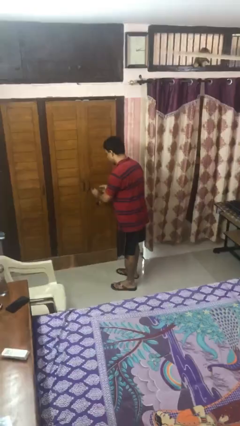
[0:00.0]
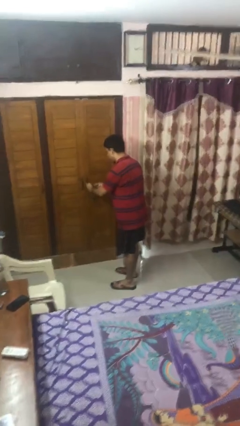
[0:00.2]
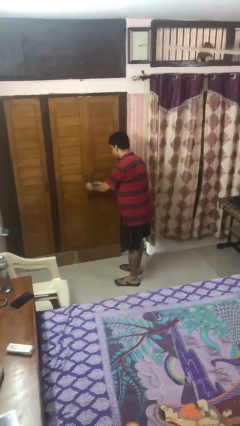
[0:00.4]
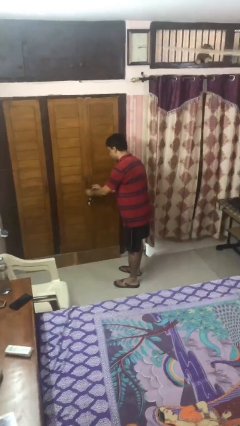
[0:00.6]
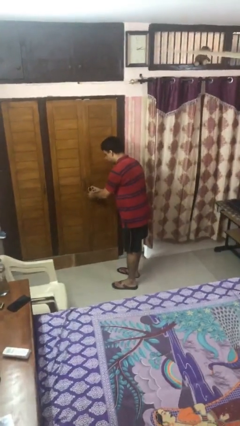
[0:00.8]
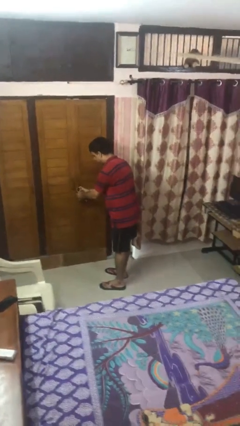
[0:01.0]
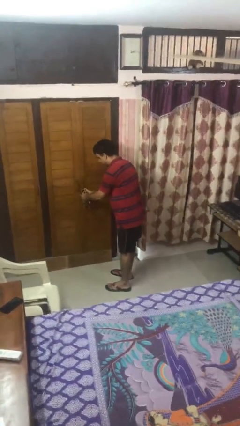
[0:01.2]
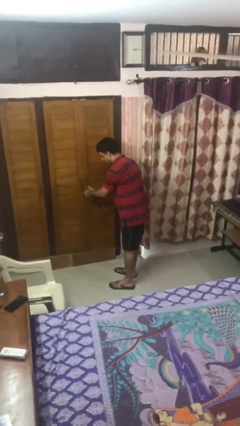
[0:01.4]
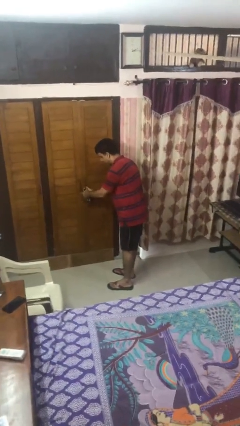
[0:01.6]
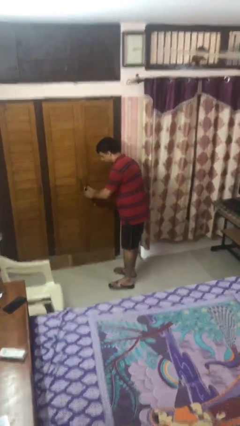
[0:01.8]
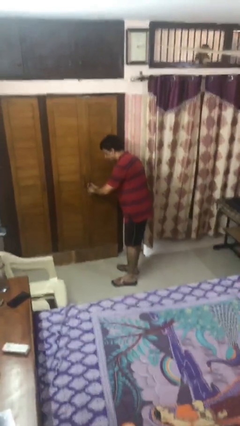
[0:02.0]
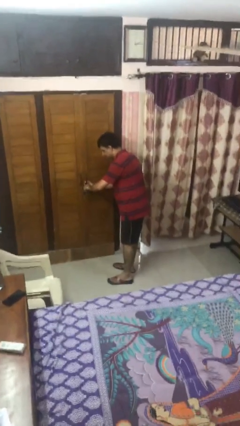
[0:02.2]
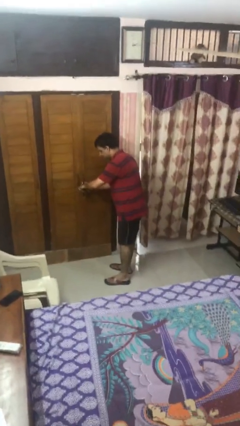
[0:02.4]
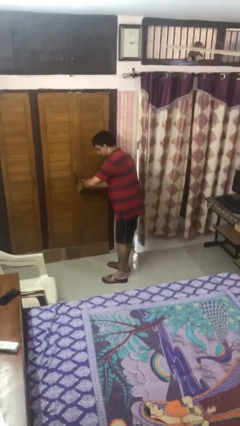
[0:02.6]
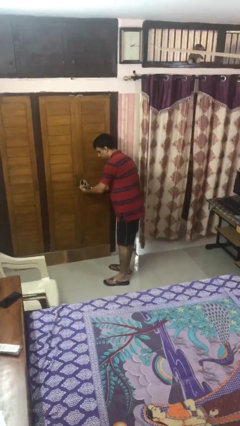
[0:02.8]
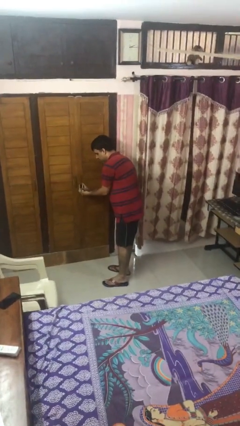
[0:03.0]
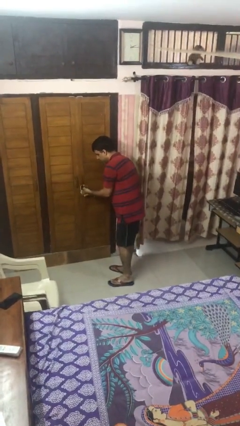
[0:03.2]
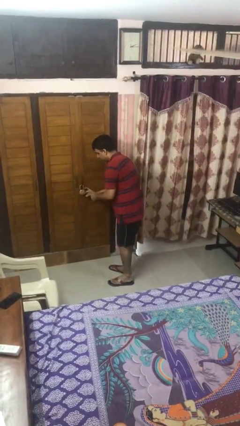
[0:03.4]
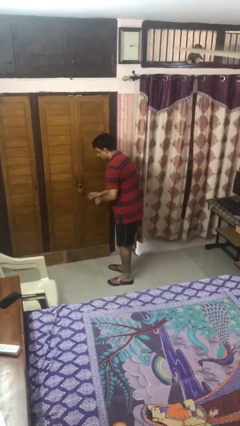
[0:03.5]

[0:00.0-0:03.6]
person locks door with keys

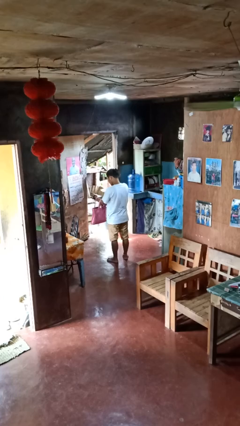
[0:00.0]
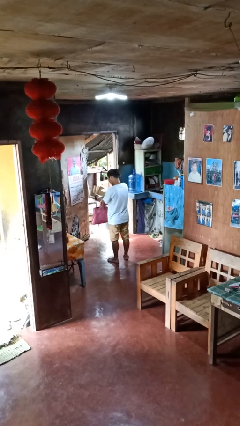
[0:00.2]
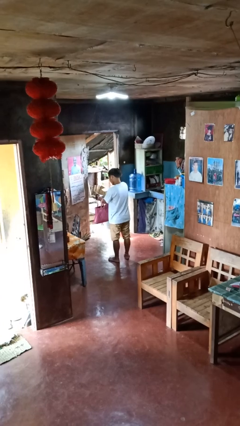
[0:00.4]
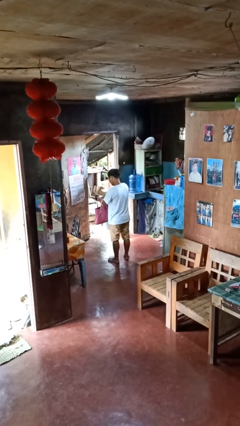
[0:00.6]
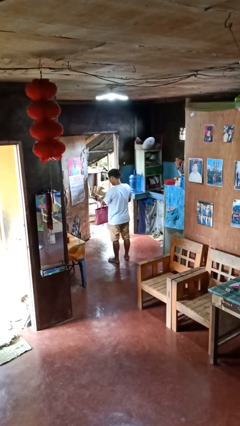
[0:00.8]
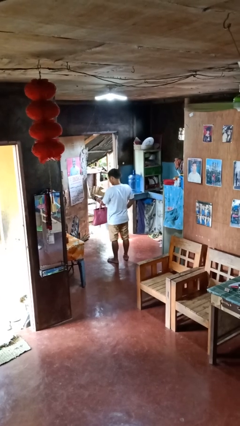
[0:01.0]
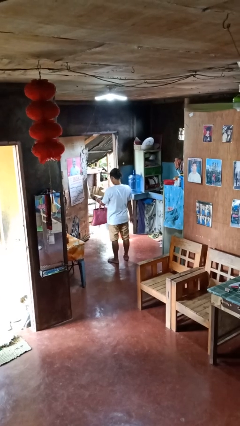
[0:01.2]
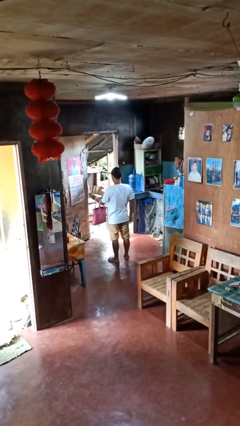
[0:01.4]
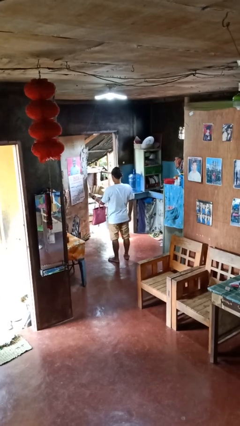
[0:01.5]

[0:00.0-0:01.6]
person puts object into purse

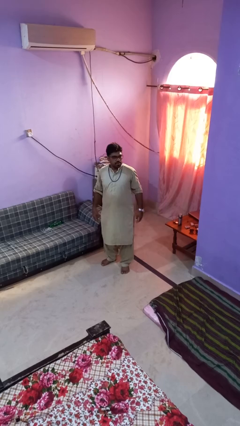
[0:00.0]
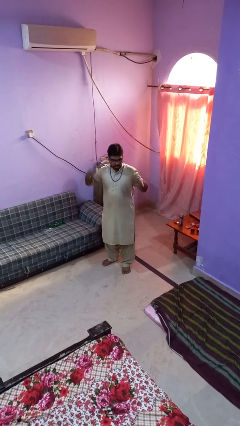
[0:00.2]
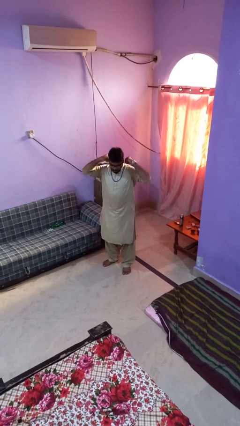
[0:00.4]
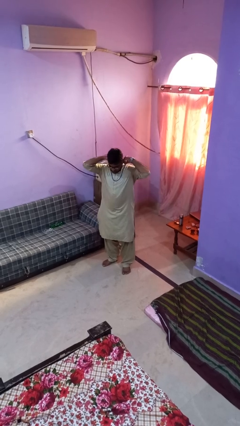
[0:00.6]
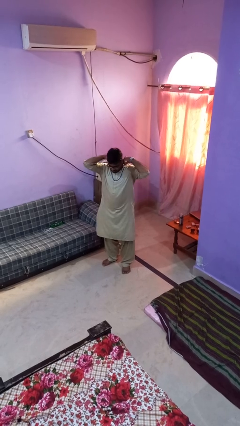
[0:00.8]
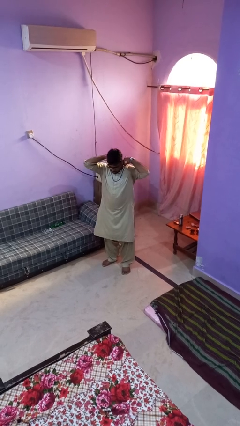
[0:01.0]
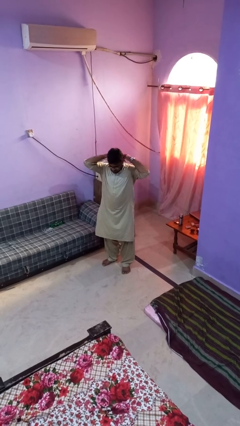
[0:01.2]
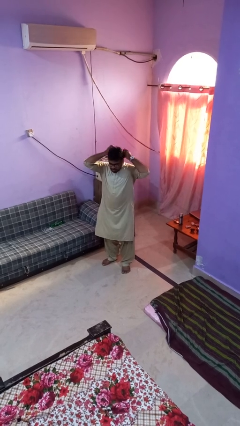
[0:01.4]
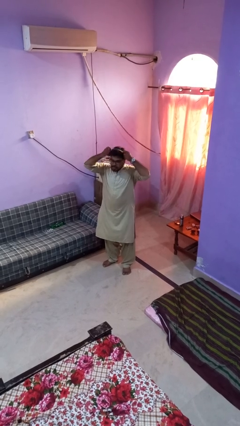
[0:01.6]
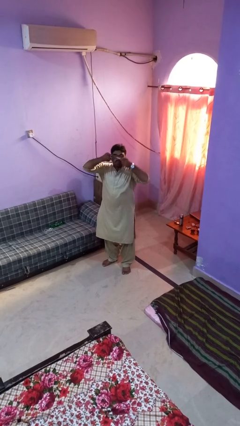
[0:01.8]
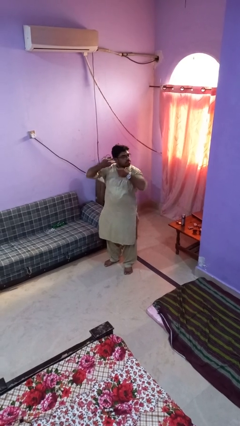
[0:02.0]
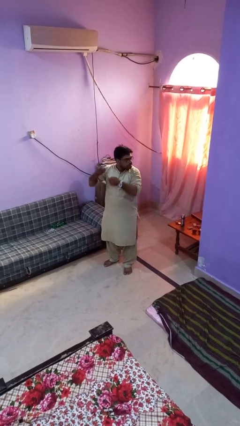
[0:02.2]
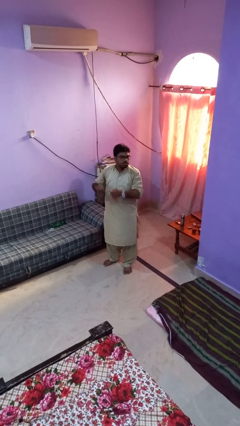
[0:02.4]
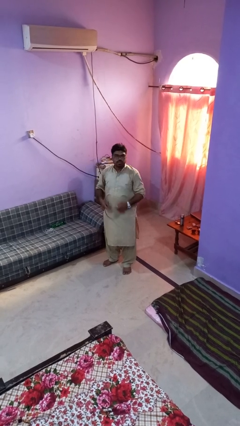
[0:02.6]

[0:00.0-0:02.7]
person takes off necklace

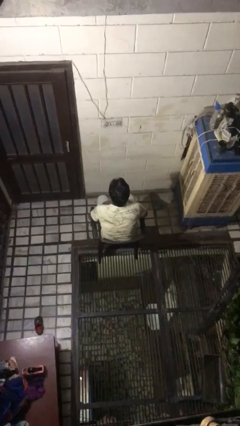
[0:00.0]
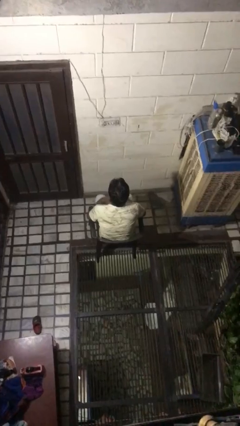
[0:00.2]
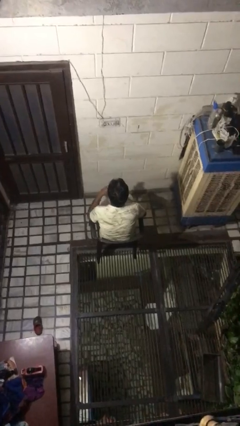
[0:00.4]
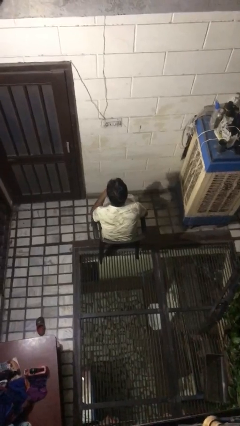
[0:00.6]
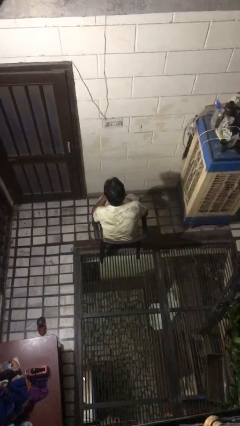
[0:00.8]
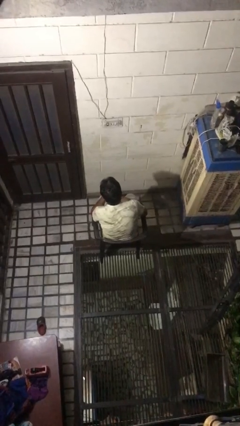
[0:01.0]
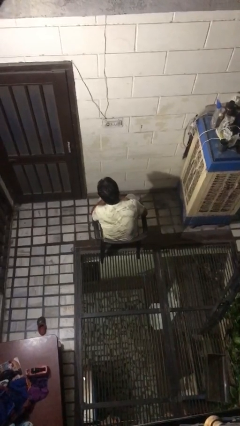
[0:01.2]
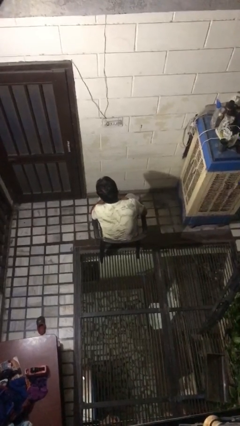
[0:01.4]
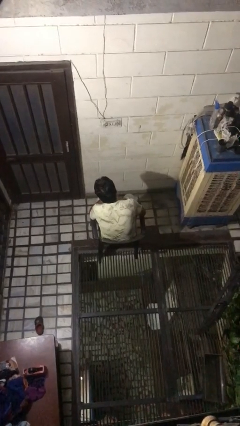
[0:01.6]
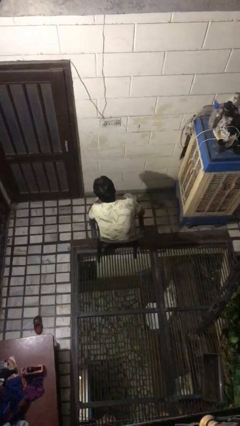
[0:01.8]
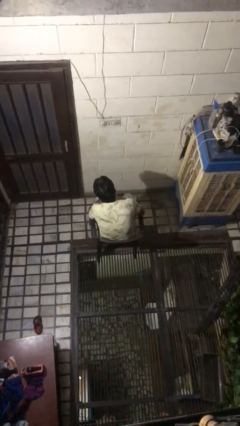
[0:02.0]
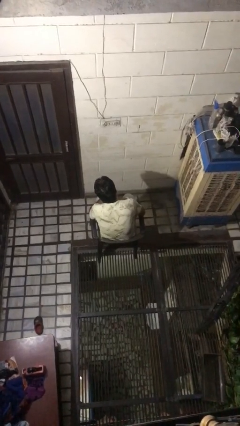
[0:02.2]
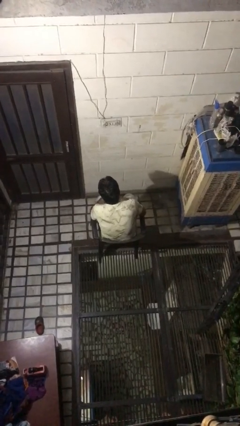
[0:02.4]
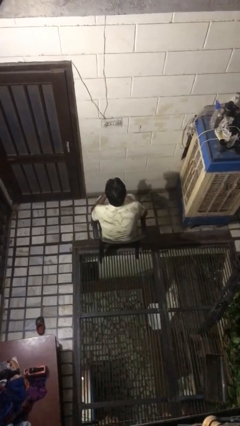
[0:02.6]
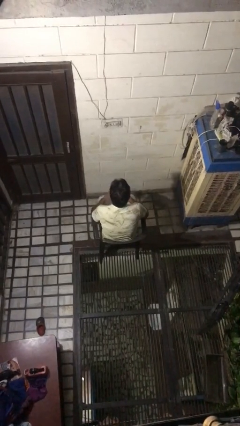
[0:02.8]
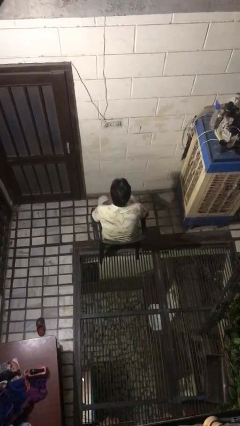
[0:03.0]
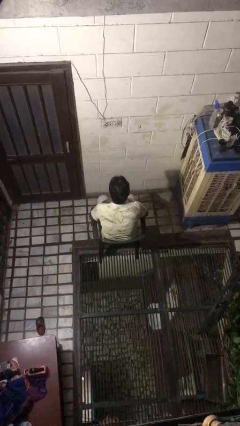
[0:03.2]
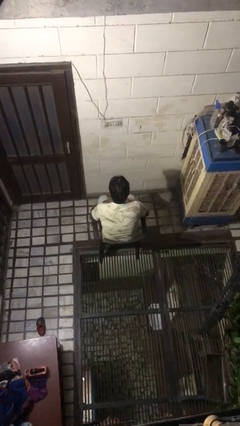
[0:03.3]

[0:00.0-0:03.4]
person strokes chin

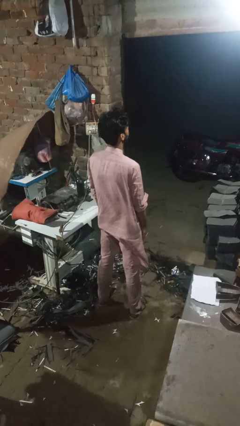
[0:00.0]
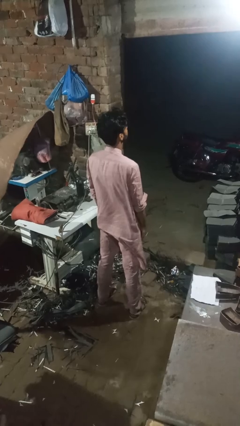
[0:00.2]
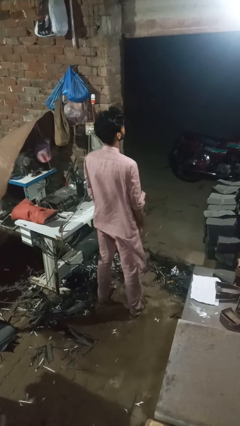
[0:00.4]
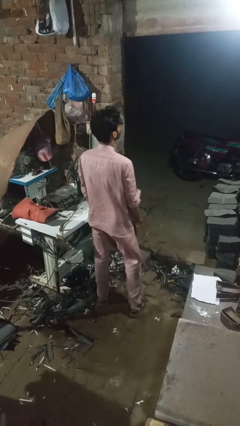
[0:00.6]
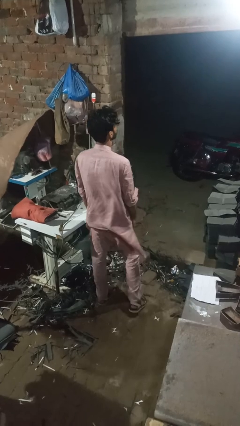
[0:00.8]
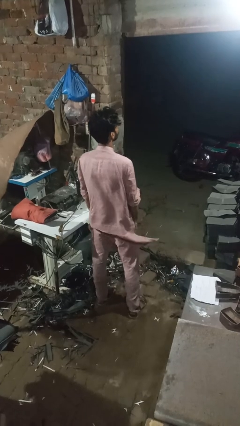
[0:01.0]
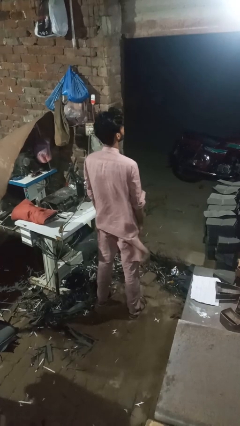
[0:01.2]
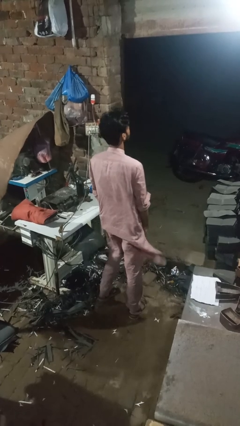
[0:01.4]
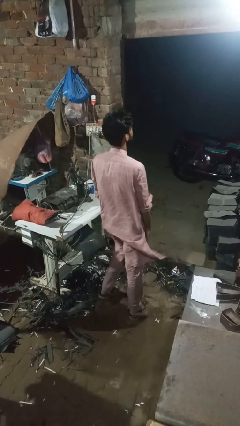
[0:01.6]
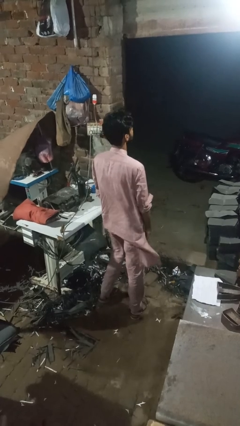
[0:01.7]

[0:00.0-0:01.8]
person wiggles hips

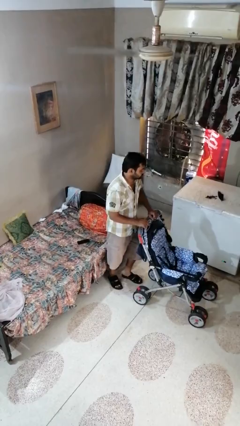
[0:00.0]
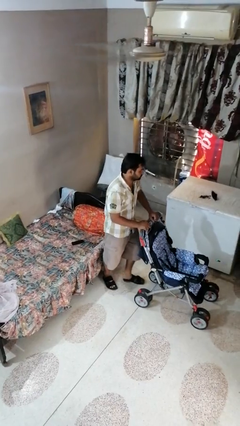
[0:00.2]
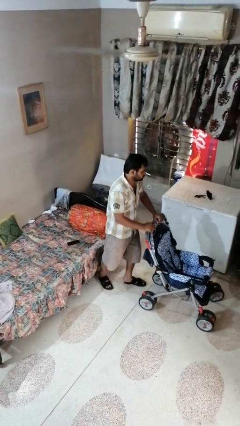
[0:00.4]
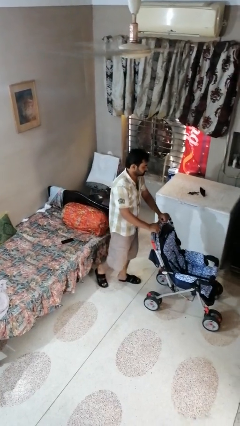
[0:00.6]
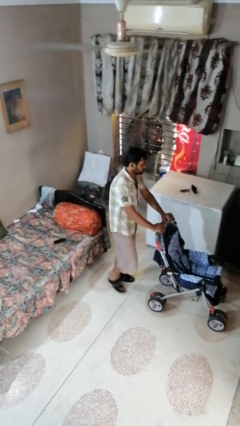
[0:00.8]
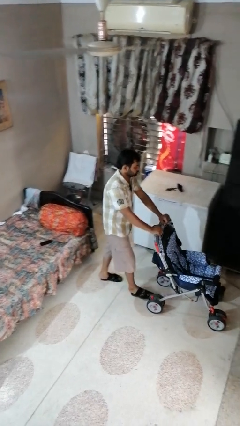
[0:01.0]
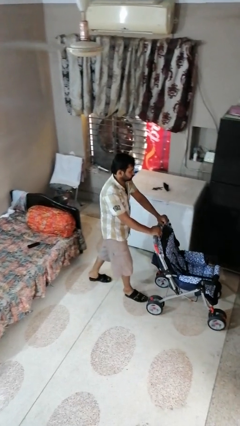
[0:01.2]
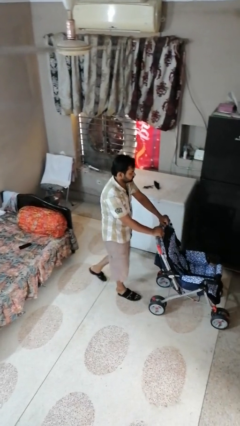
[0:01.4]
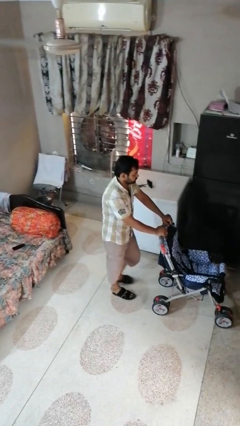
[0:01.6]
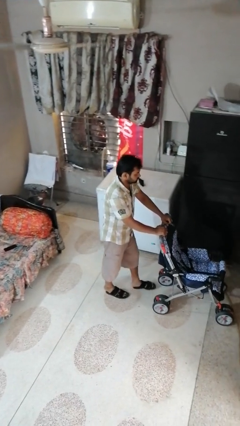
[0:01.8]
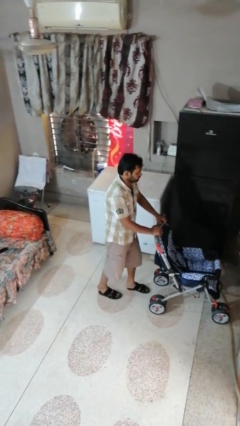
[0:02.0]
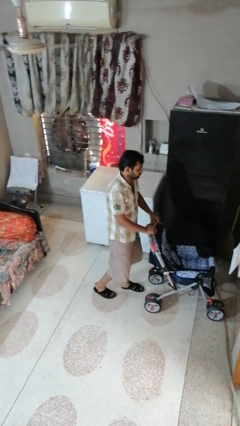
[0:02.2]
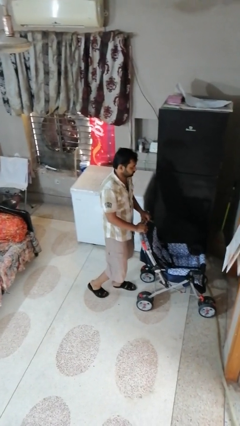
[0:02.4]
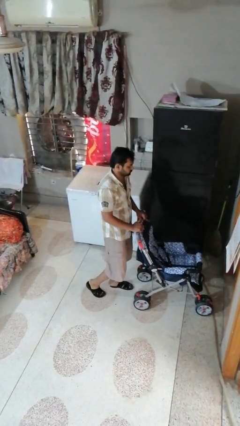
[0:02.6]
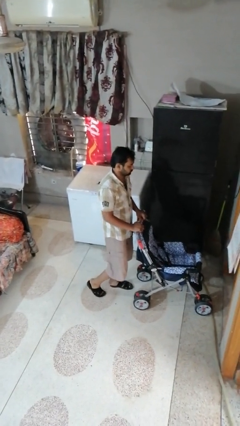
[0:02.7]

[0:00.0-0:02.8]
person pushes wheeled cart

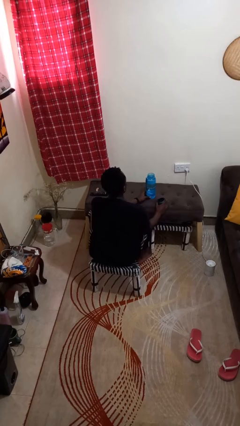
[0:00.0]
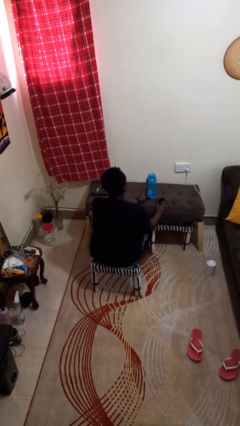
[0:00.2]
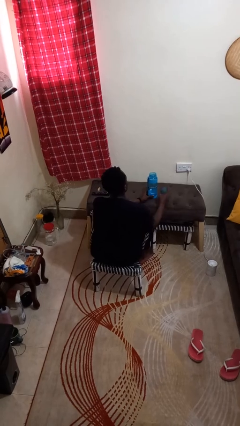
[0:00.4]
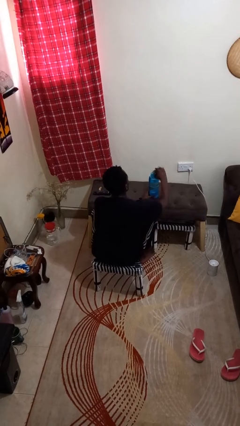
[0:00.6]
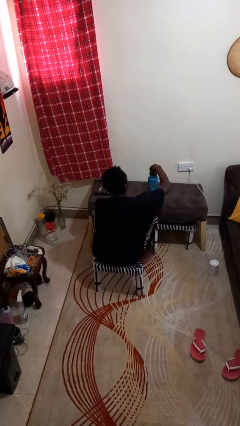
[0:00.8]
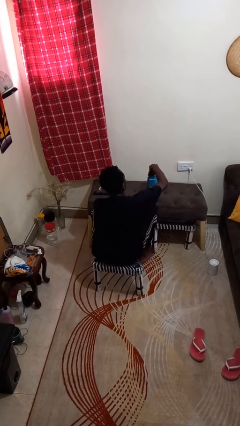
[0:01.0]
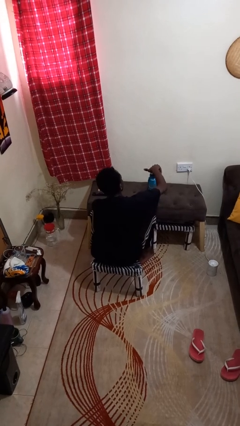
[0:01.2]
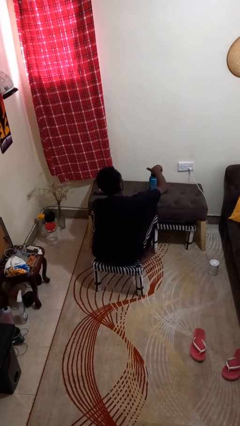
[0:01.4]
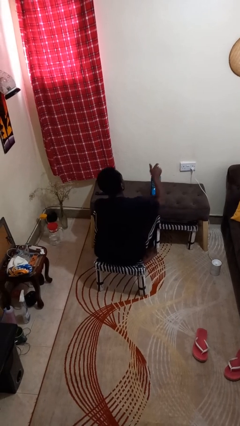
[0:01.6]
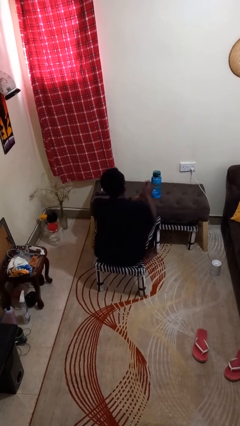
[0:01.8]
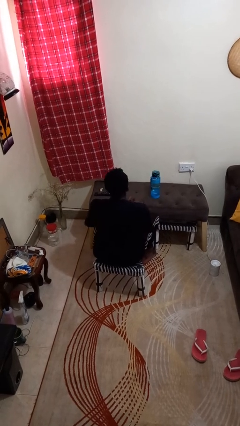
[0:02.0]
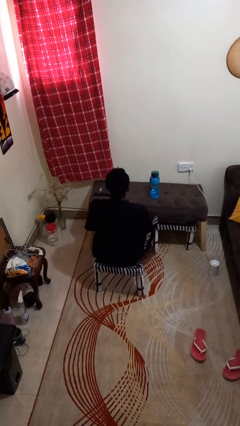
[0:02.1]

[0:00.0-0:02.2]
person closes jar
